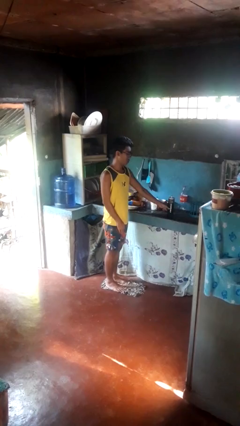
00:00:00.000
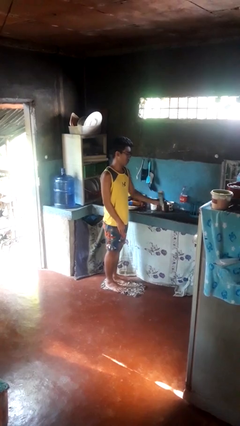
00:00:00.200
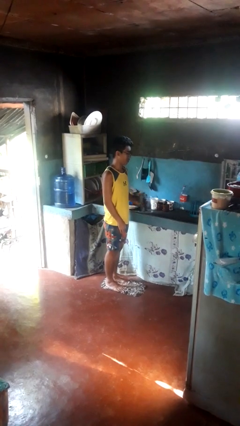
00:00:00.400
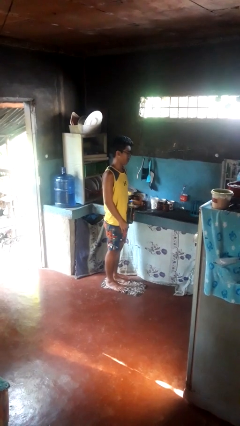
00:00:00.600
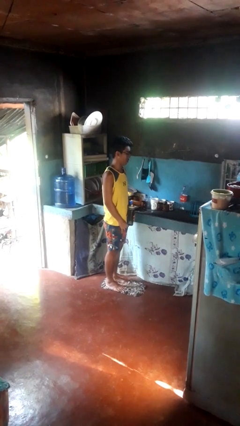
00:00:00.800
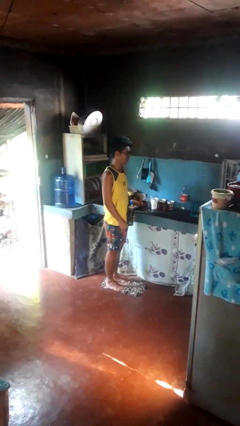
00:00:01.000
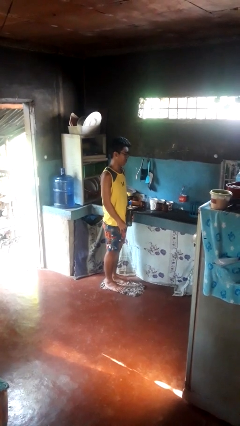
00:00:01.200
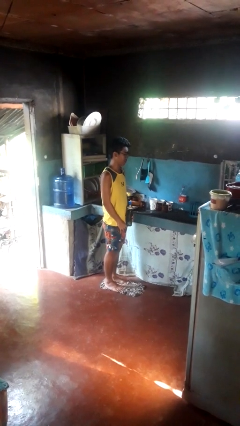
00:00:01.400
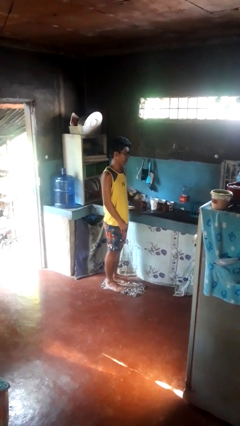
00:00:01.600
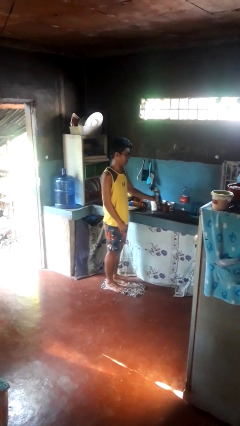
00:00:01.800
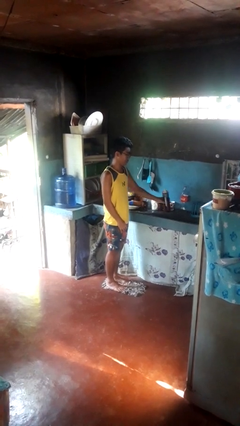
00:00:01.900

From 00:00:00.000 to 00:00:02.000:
person picks up object from countertop

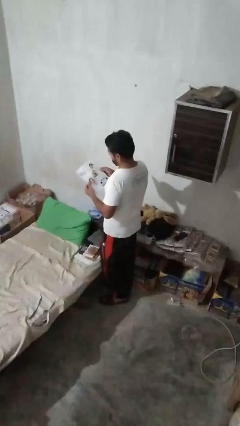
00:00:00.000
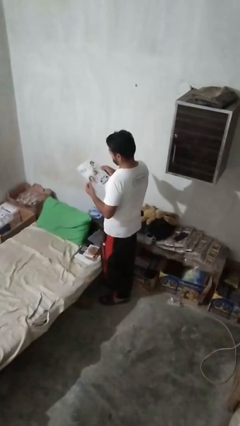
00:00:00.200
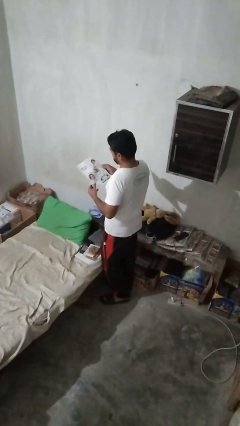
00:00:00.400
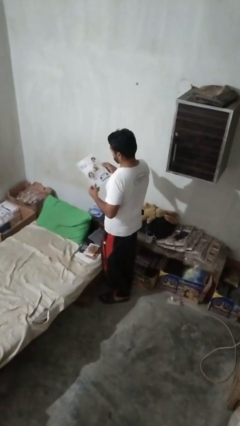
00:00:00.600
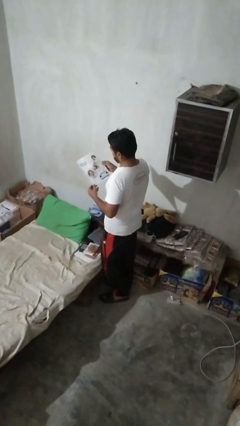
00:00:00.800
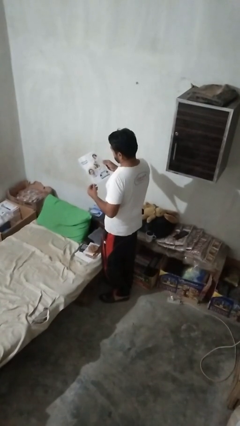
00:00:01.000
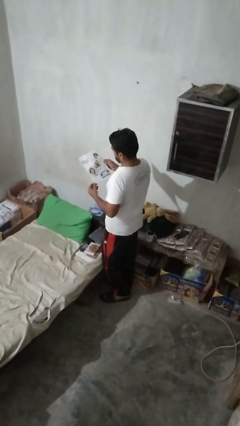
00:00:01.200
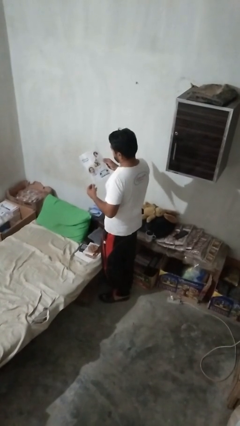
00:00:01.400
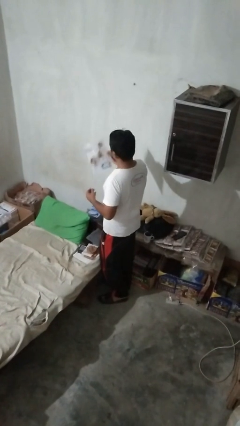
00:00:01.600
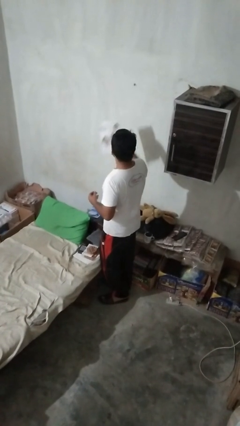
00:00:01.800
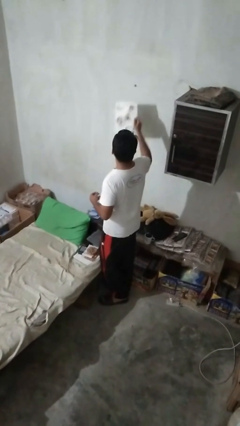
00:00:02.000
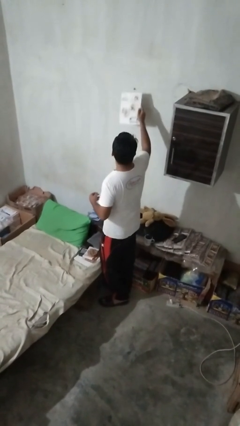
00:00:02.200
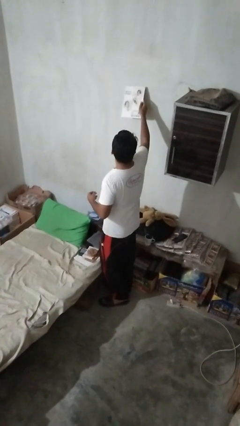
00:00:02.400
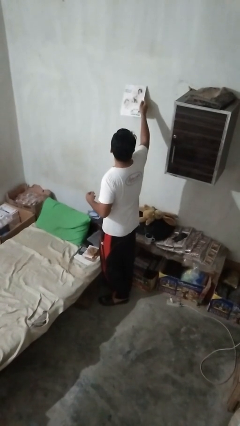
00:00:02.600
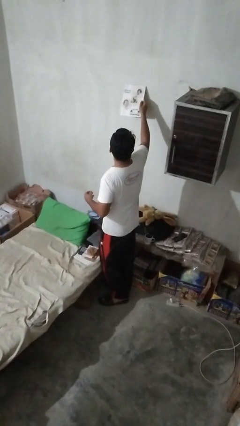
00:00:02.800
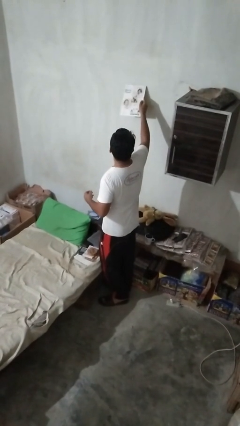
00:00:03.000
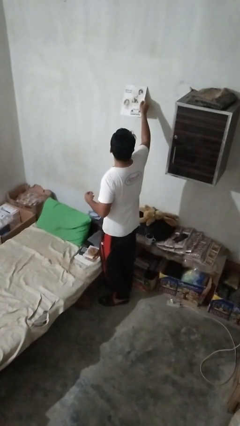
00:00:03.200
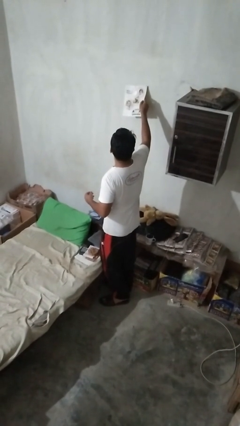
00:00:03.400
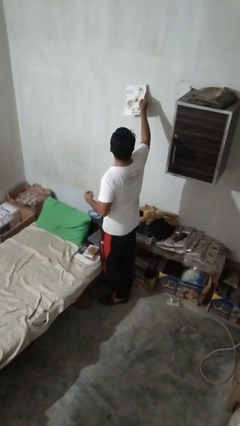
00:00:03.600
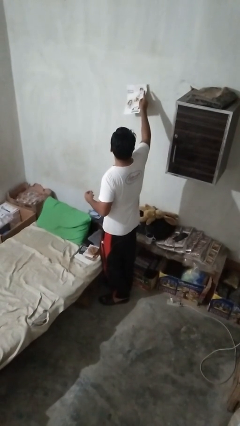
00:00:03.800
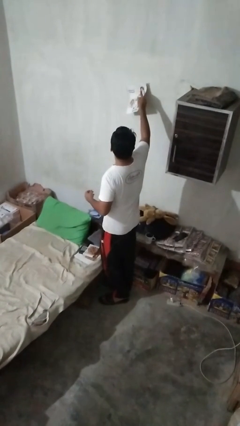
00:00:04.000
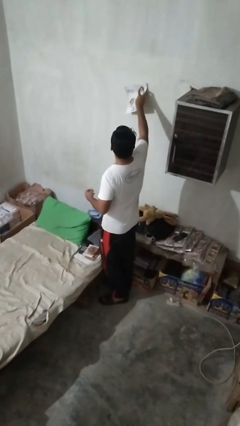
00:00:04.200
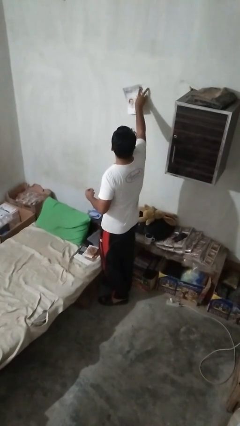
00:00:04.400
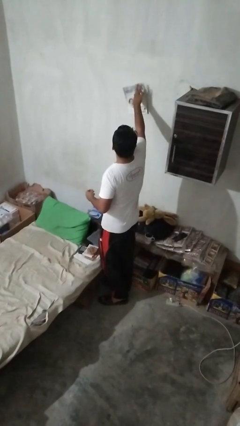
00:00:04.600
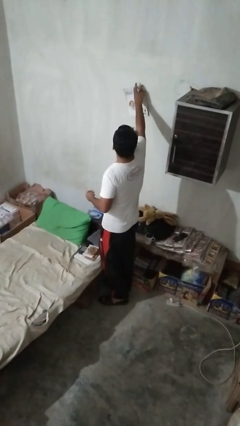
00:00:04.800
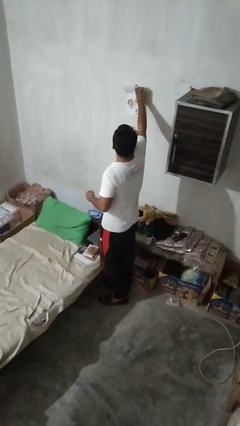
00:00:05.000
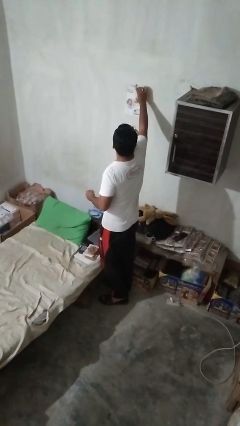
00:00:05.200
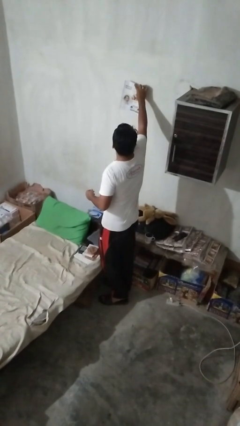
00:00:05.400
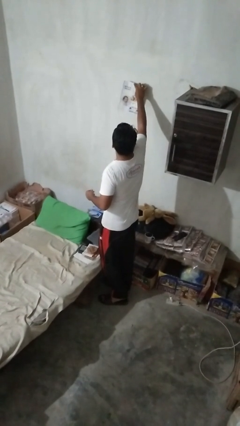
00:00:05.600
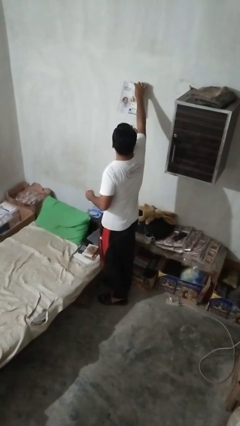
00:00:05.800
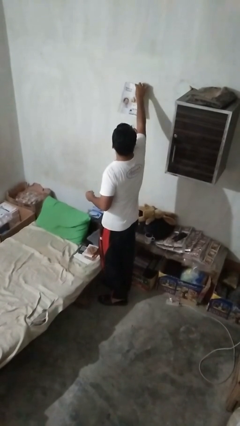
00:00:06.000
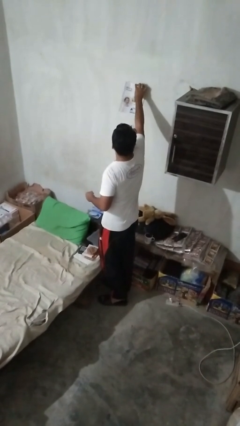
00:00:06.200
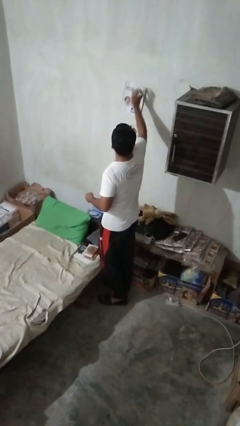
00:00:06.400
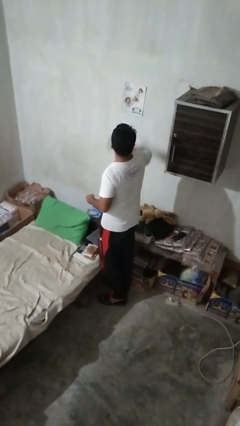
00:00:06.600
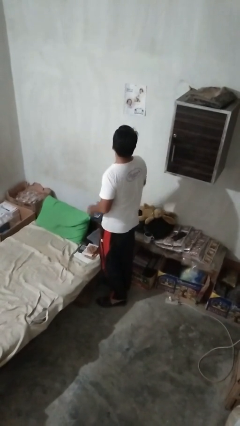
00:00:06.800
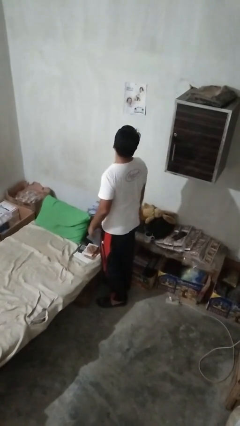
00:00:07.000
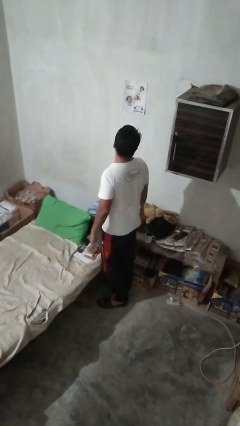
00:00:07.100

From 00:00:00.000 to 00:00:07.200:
person puts up picture frame

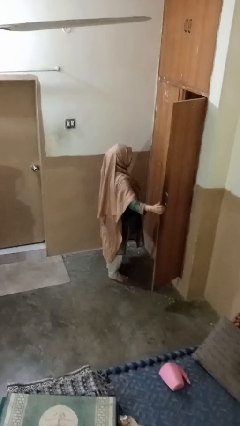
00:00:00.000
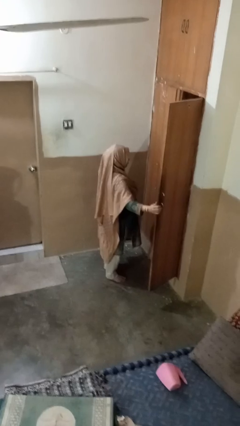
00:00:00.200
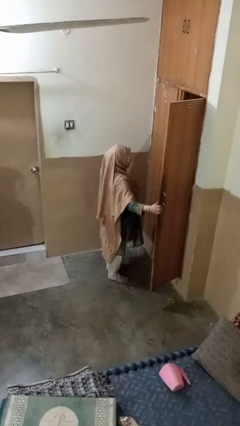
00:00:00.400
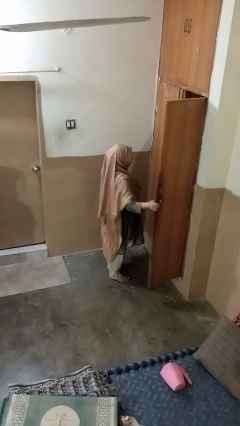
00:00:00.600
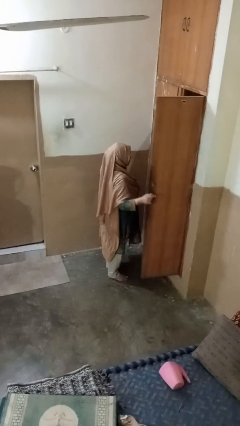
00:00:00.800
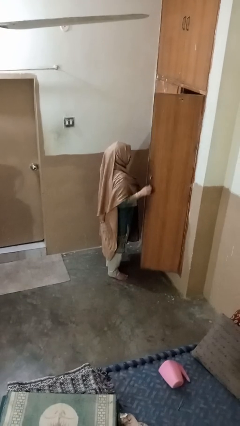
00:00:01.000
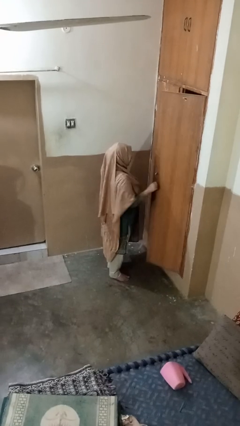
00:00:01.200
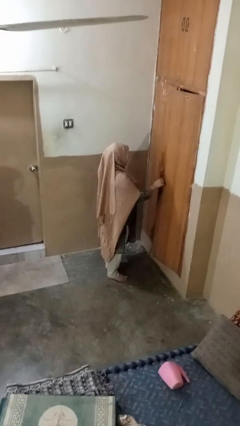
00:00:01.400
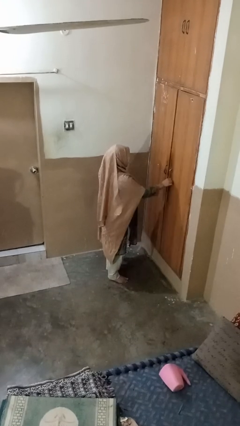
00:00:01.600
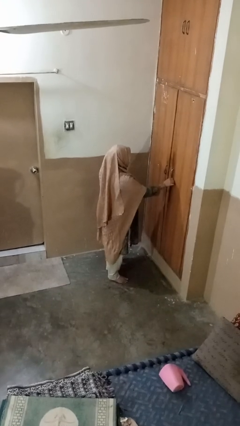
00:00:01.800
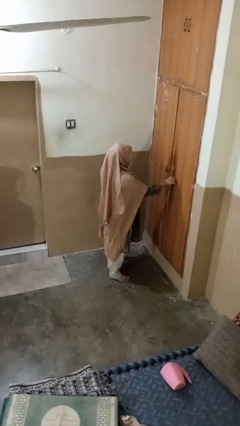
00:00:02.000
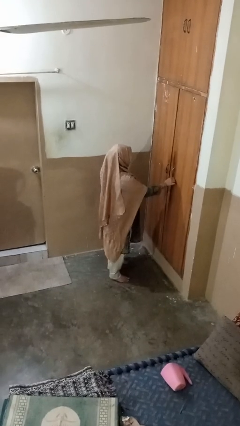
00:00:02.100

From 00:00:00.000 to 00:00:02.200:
person closes closet door

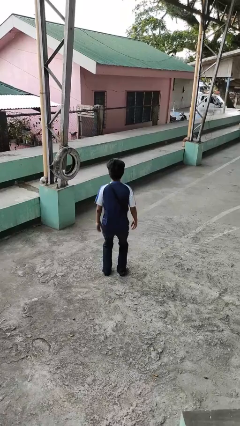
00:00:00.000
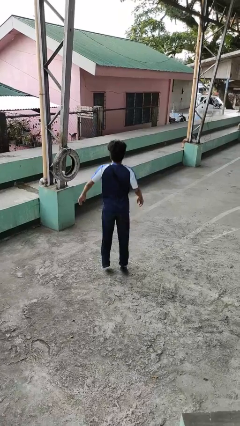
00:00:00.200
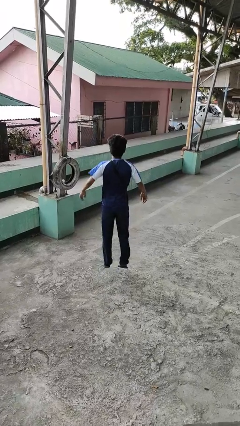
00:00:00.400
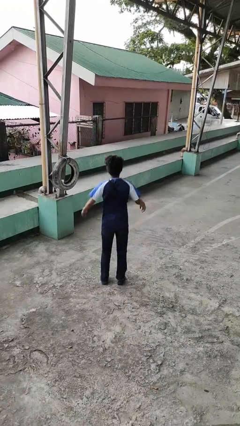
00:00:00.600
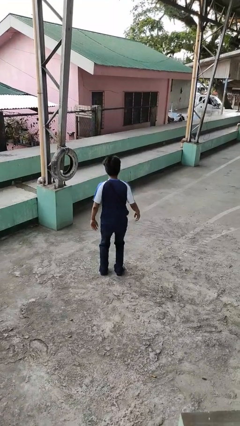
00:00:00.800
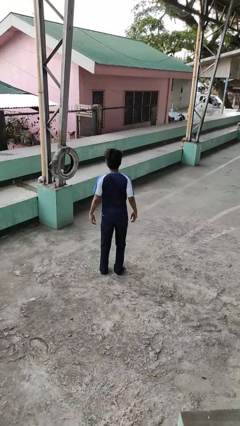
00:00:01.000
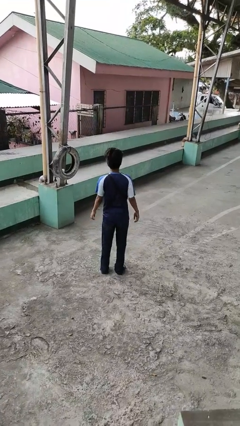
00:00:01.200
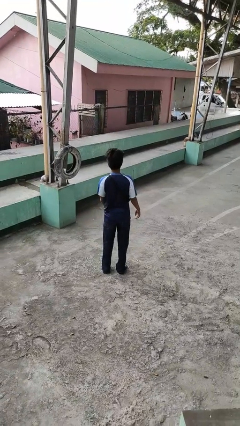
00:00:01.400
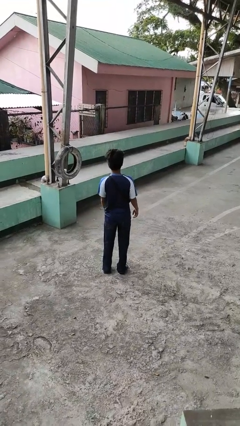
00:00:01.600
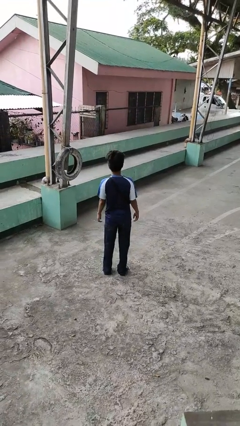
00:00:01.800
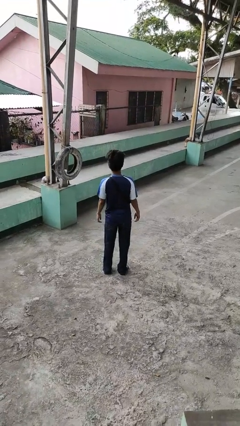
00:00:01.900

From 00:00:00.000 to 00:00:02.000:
person jumps

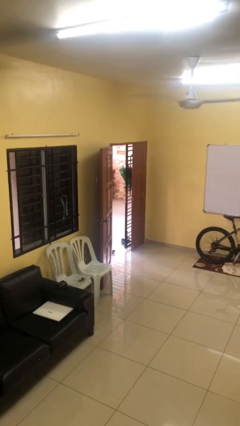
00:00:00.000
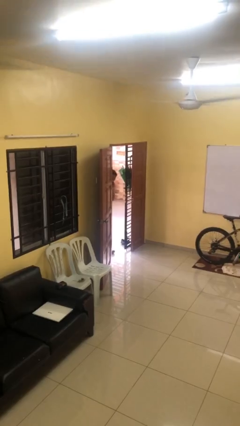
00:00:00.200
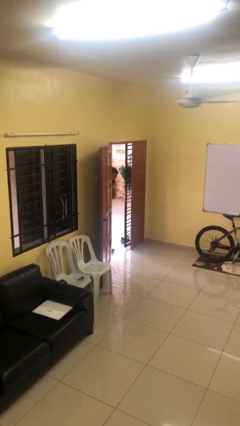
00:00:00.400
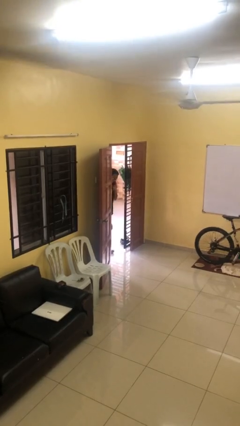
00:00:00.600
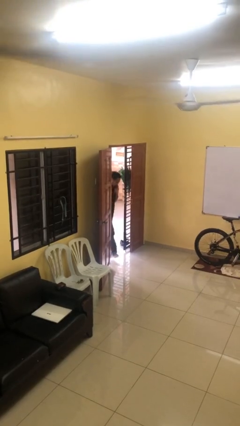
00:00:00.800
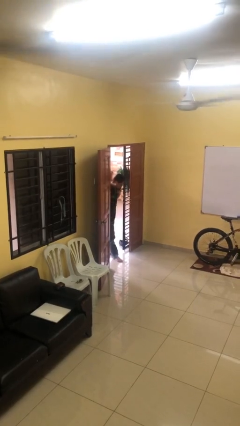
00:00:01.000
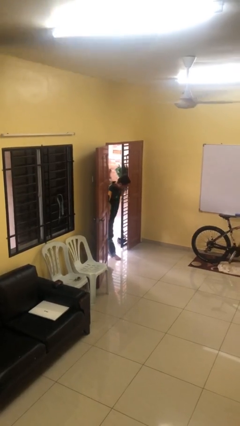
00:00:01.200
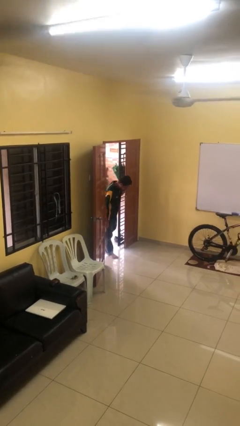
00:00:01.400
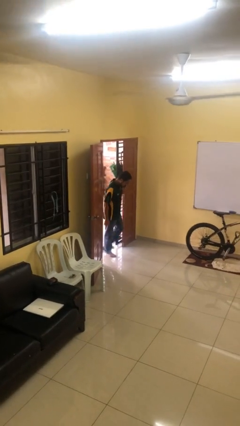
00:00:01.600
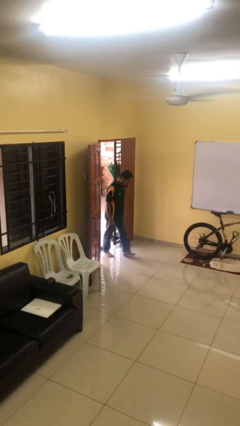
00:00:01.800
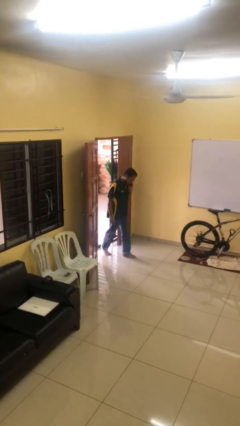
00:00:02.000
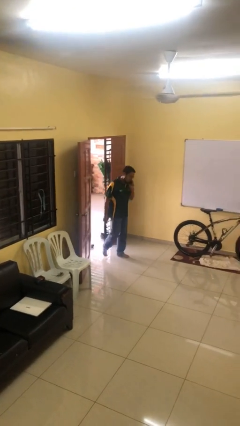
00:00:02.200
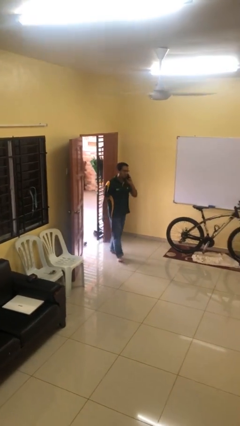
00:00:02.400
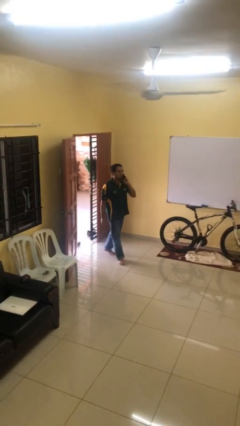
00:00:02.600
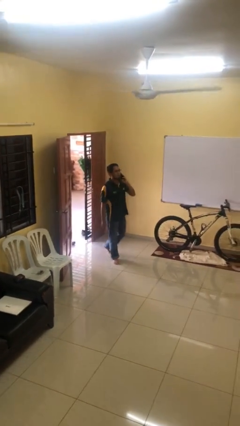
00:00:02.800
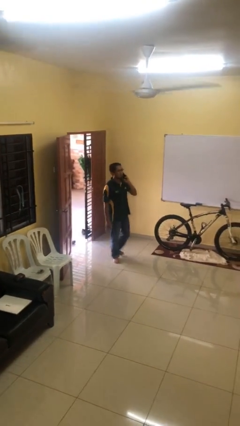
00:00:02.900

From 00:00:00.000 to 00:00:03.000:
person enters scene through structure

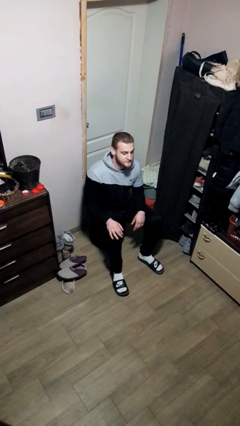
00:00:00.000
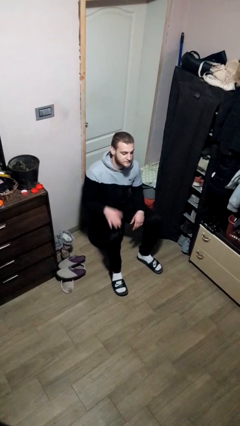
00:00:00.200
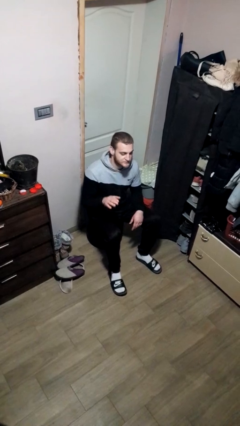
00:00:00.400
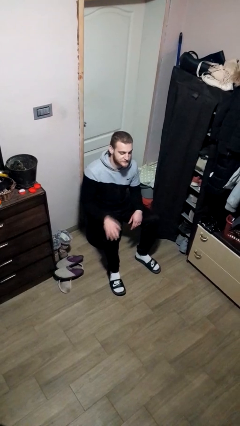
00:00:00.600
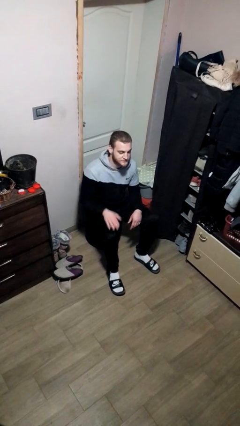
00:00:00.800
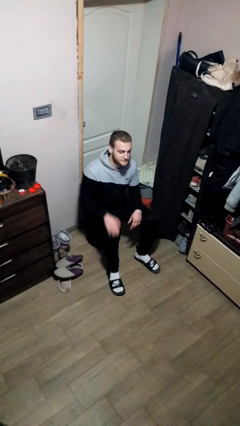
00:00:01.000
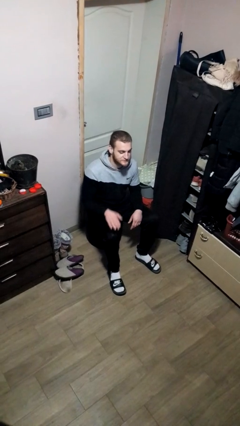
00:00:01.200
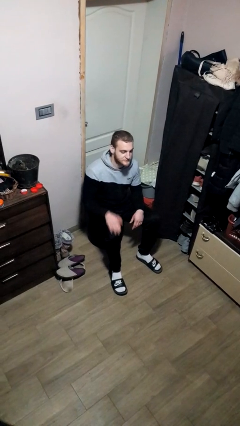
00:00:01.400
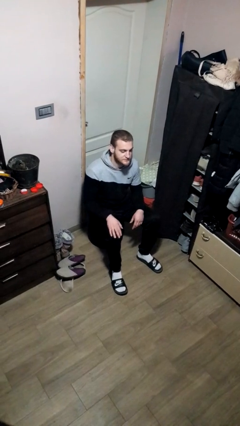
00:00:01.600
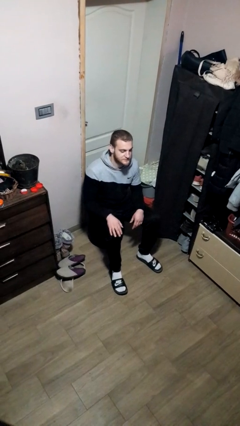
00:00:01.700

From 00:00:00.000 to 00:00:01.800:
person slaps hands on thighs
